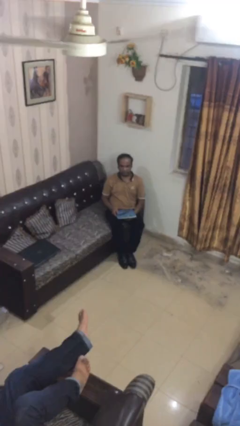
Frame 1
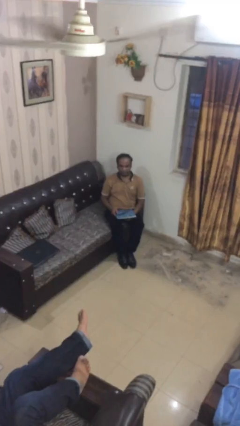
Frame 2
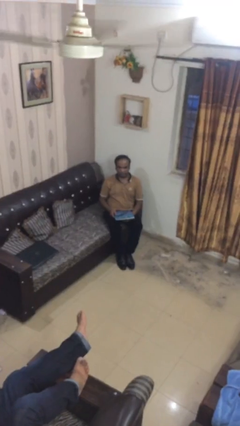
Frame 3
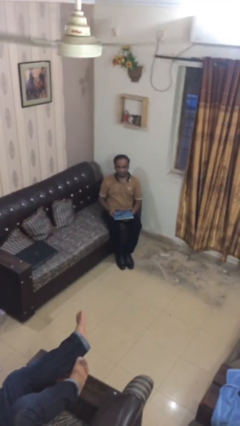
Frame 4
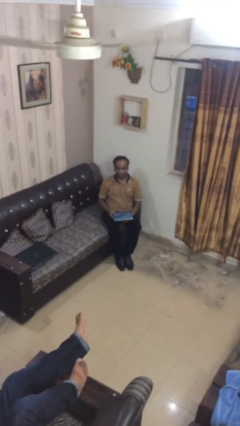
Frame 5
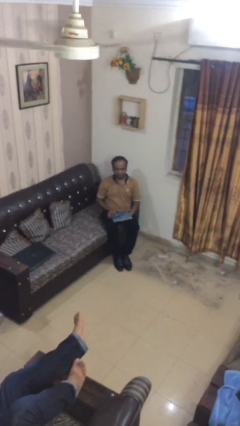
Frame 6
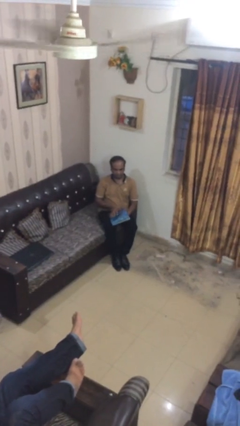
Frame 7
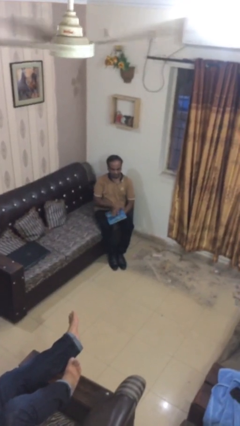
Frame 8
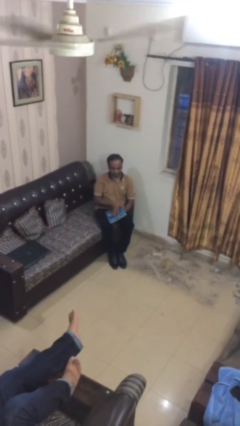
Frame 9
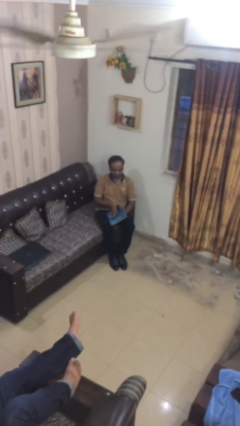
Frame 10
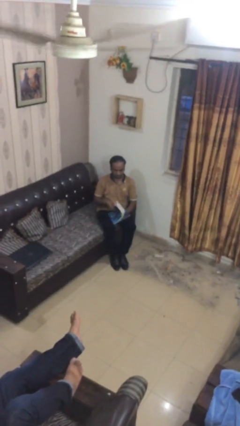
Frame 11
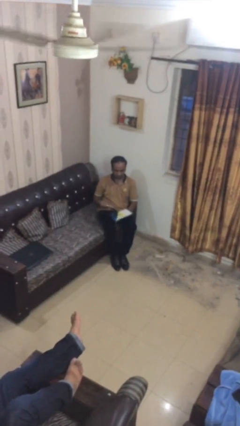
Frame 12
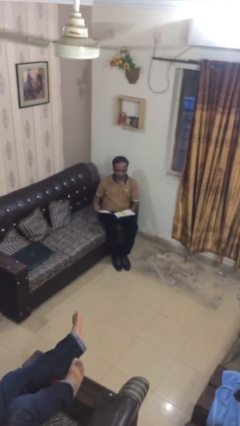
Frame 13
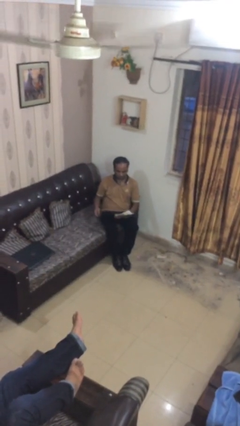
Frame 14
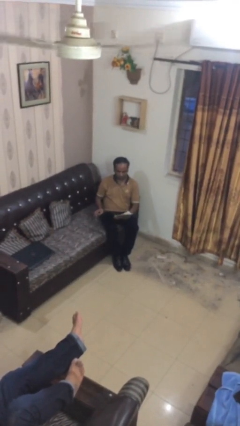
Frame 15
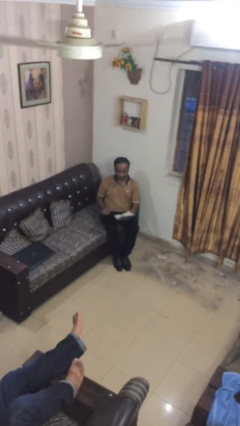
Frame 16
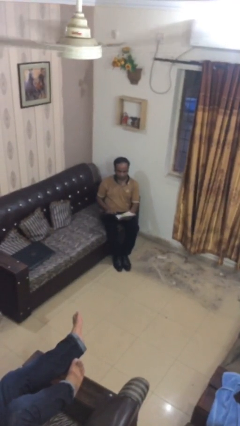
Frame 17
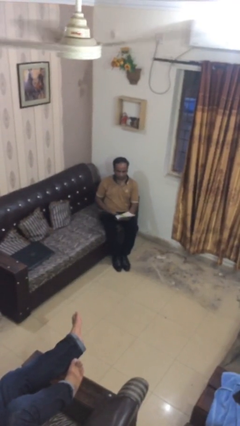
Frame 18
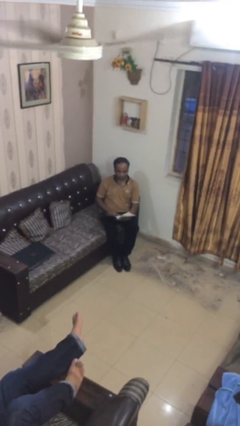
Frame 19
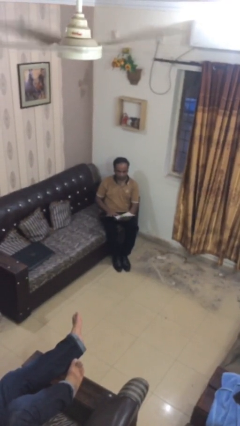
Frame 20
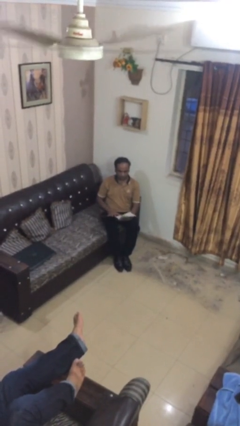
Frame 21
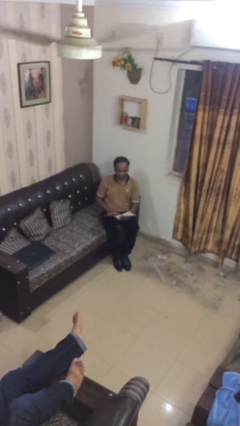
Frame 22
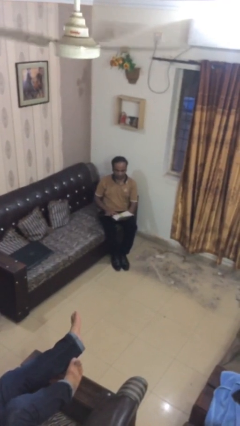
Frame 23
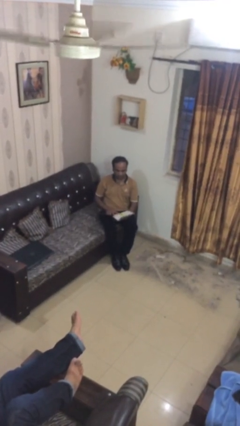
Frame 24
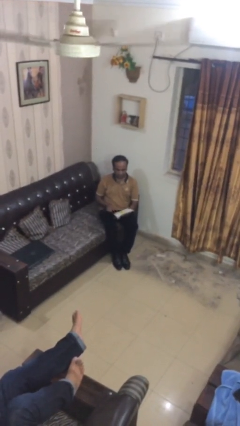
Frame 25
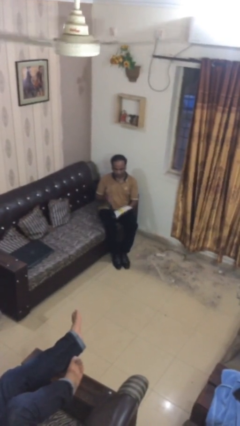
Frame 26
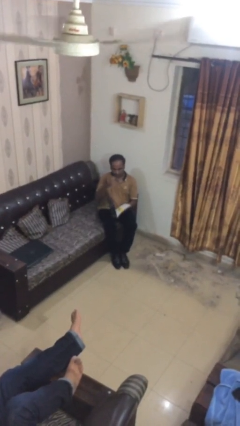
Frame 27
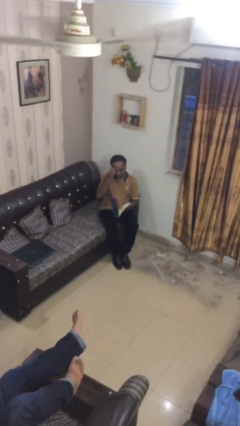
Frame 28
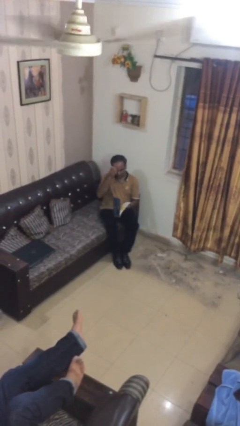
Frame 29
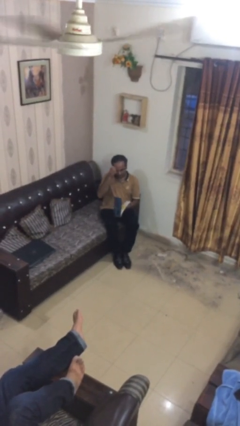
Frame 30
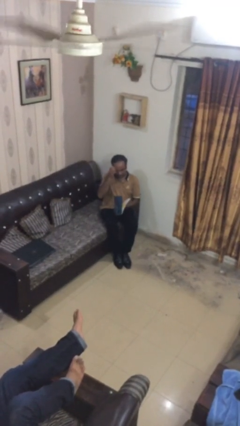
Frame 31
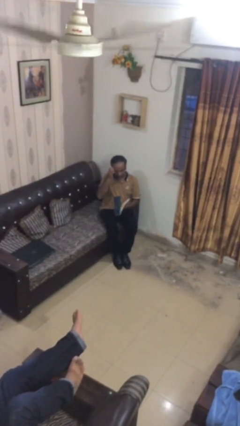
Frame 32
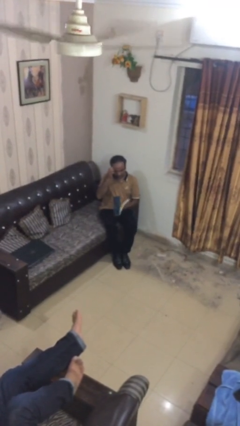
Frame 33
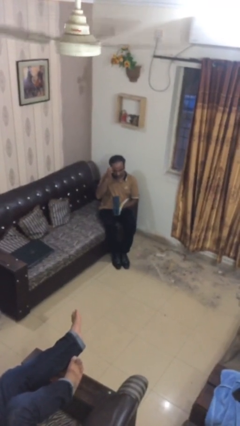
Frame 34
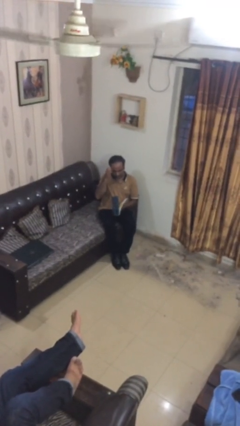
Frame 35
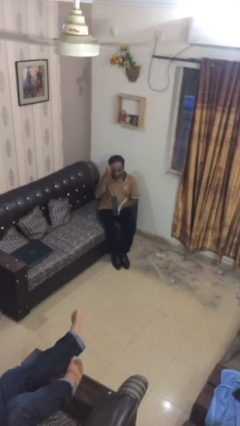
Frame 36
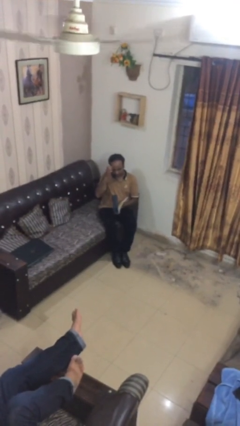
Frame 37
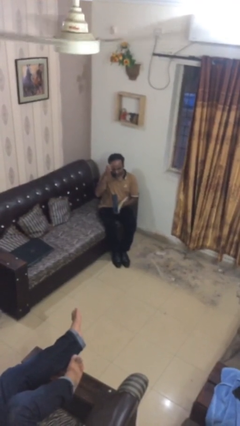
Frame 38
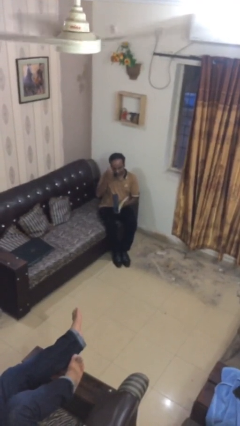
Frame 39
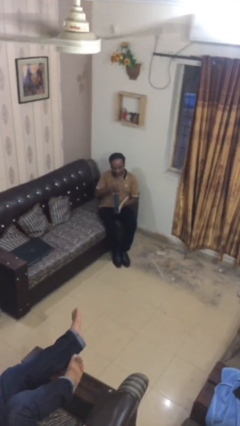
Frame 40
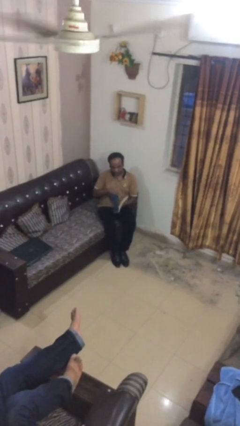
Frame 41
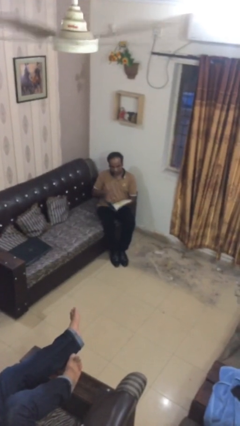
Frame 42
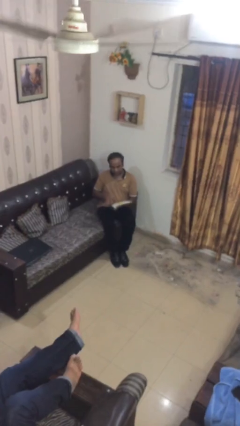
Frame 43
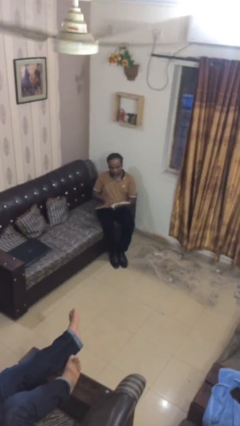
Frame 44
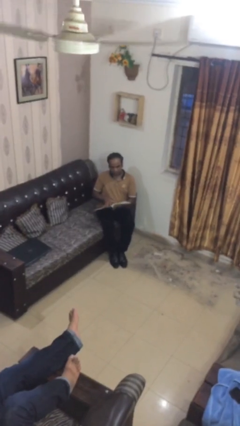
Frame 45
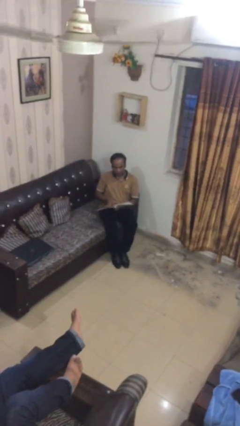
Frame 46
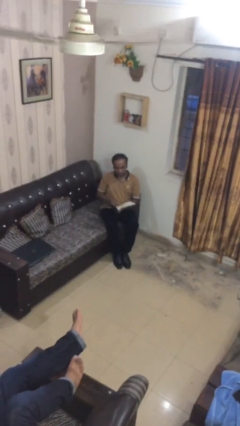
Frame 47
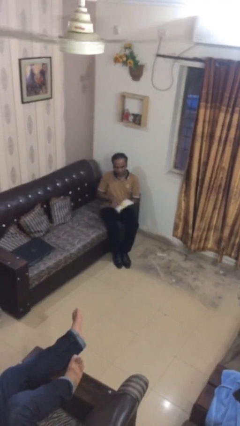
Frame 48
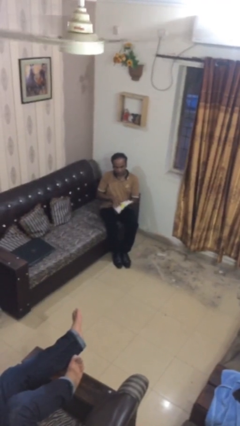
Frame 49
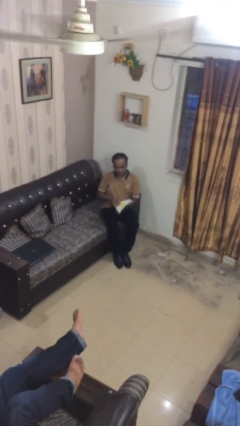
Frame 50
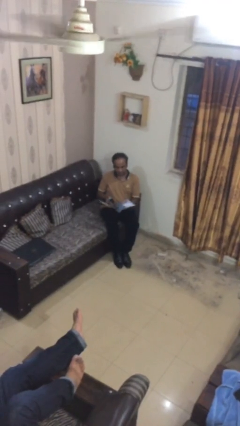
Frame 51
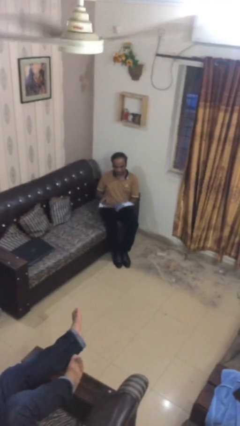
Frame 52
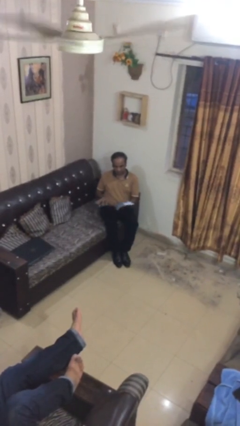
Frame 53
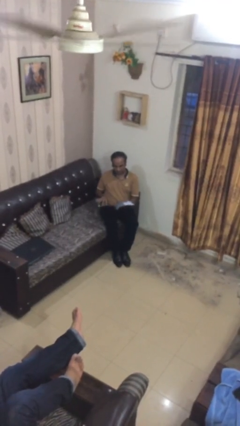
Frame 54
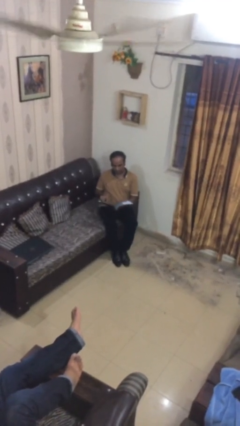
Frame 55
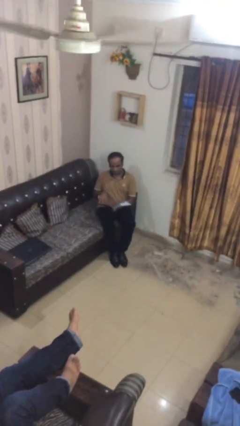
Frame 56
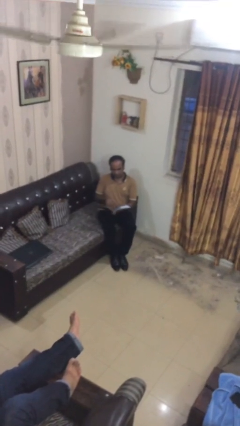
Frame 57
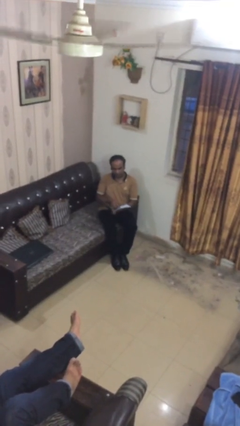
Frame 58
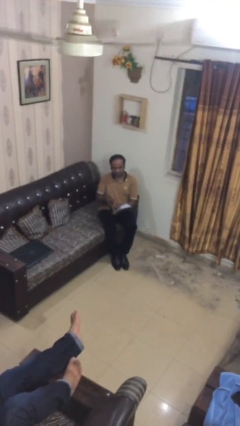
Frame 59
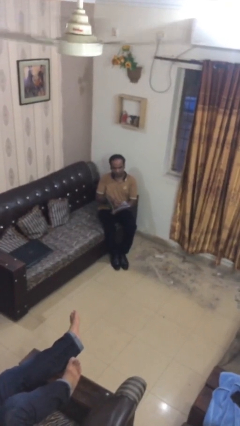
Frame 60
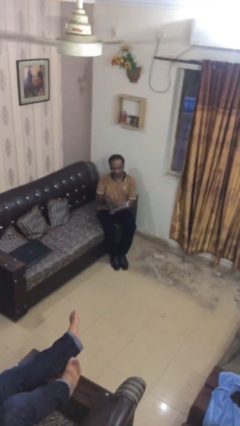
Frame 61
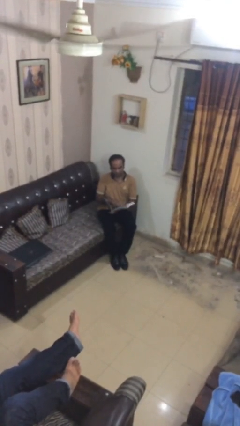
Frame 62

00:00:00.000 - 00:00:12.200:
person reads document

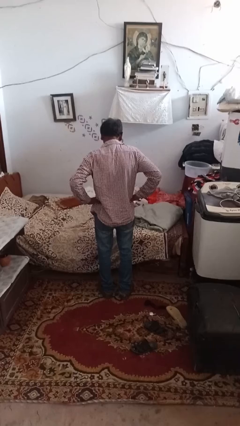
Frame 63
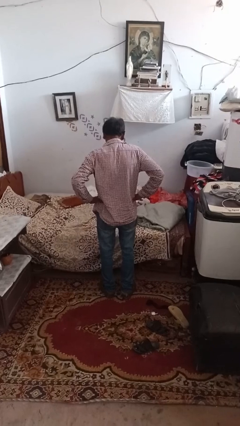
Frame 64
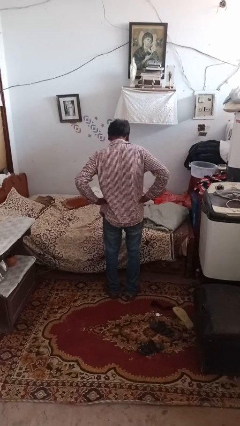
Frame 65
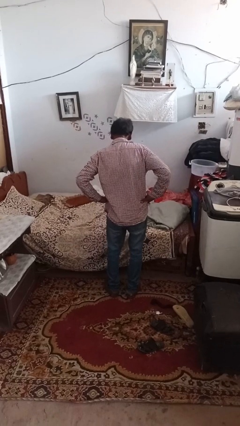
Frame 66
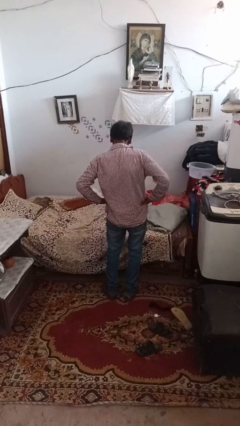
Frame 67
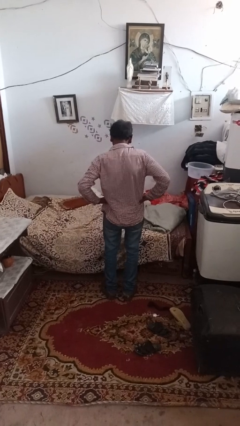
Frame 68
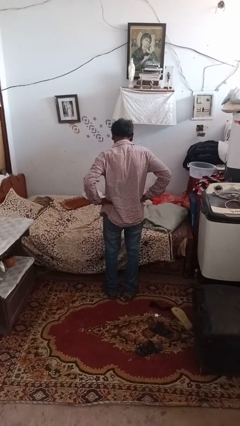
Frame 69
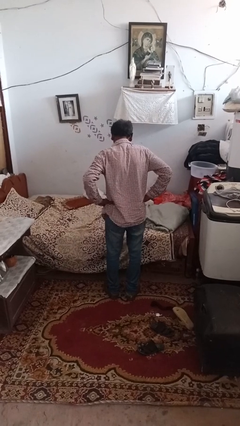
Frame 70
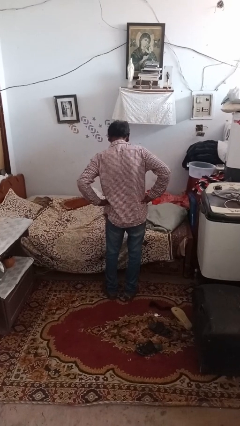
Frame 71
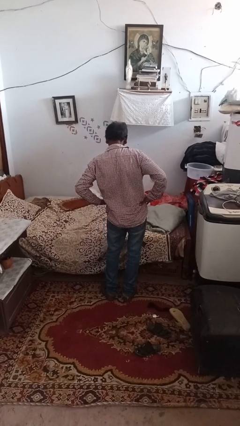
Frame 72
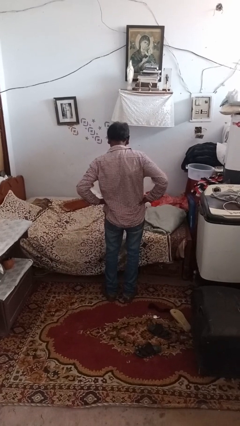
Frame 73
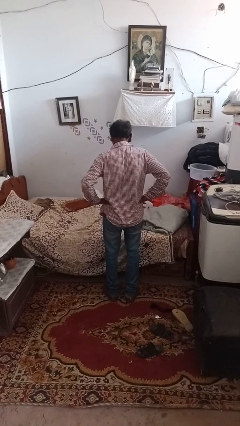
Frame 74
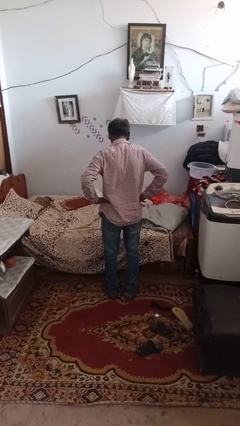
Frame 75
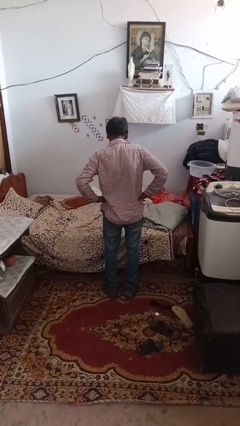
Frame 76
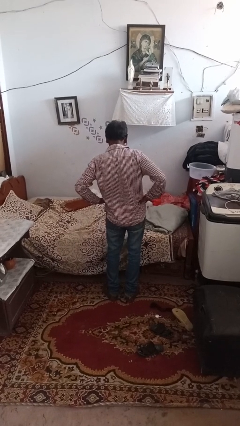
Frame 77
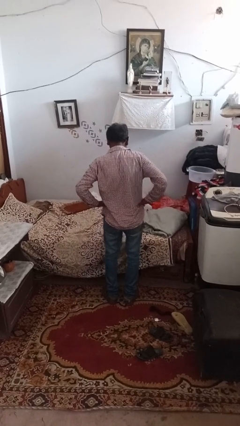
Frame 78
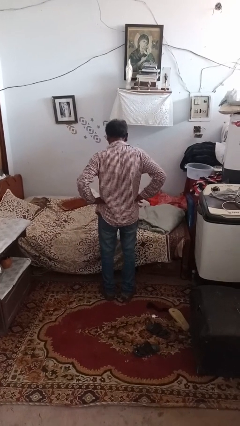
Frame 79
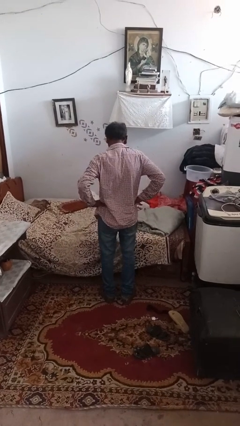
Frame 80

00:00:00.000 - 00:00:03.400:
person wiggles hips

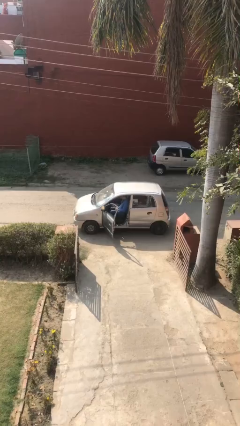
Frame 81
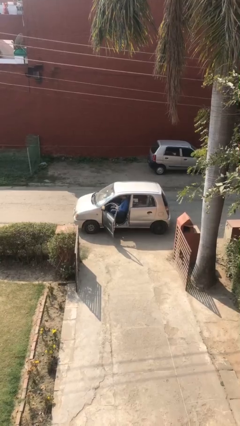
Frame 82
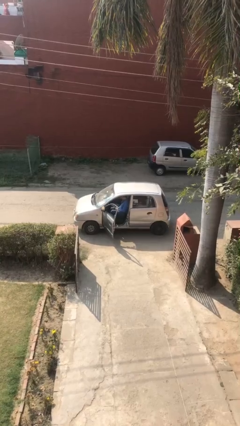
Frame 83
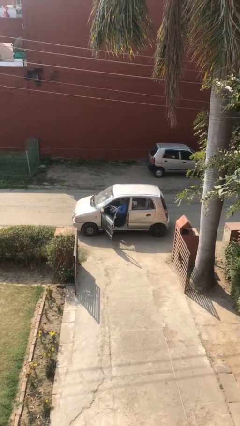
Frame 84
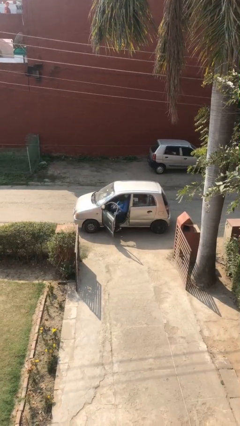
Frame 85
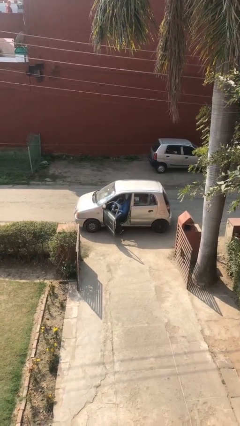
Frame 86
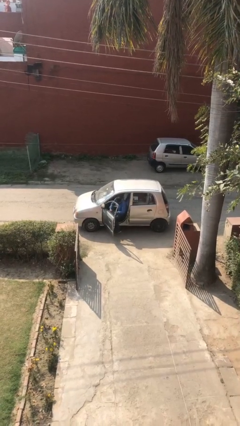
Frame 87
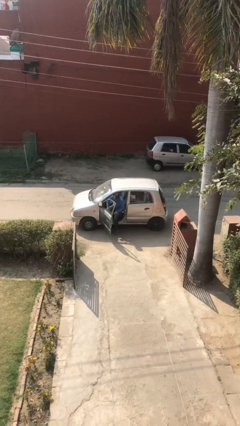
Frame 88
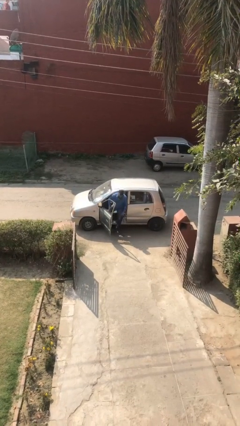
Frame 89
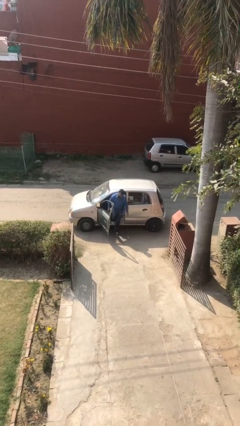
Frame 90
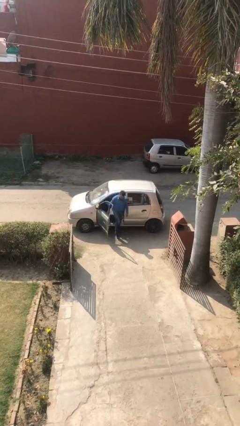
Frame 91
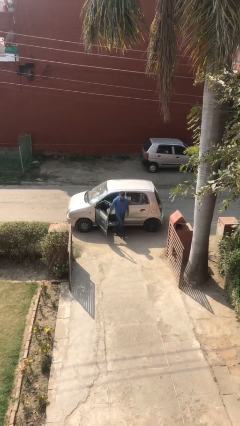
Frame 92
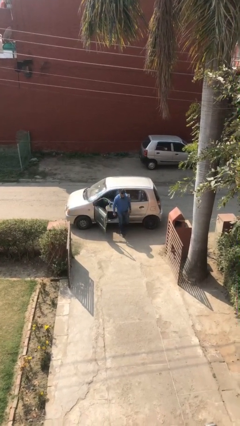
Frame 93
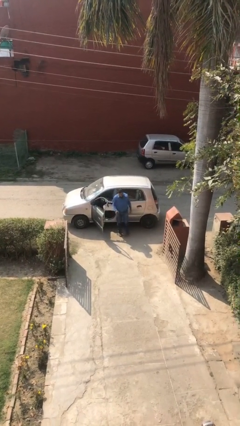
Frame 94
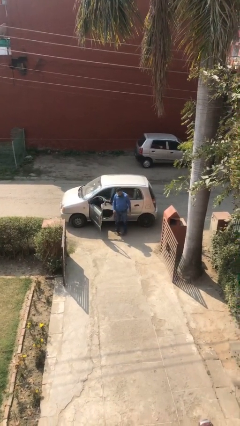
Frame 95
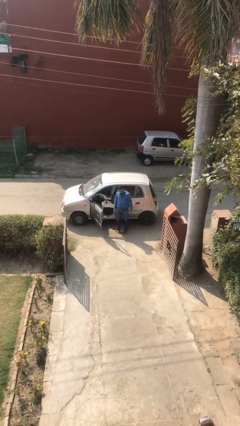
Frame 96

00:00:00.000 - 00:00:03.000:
person exits car
